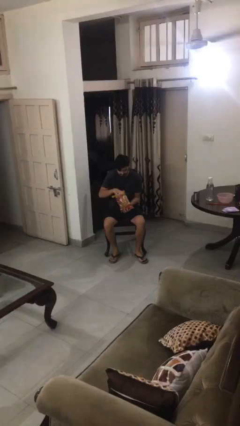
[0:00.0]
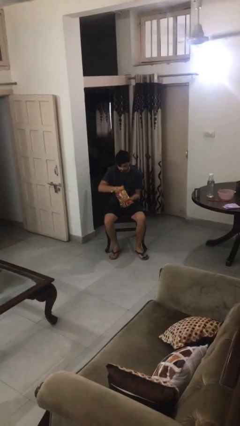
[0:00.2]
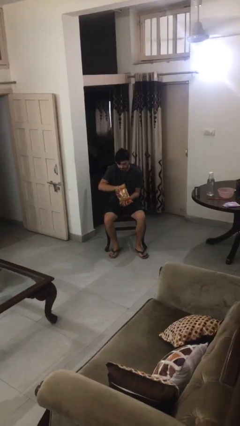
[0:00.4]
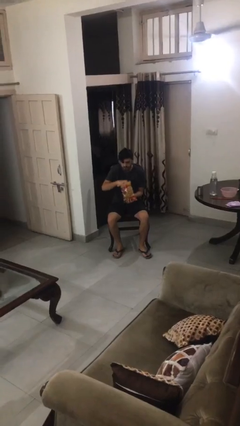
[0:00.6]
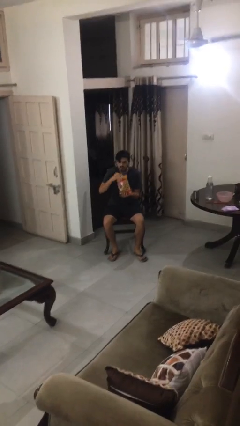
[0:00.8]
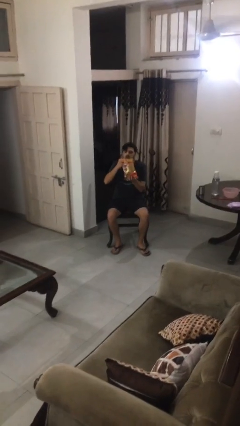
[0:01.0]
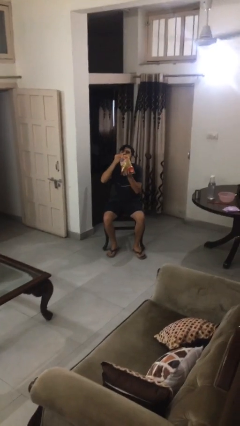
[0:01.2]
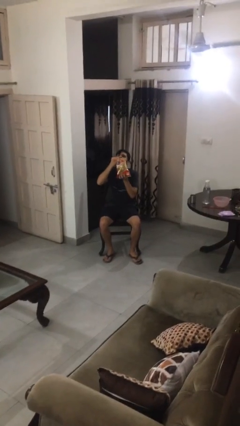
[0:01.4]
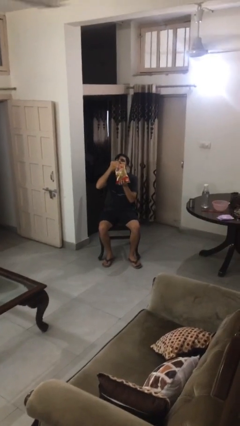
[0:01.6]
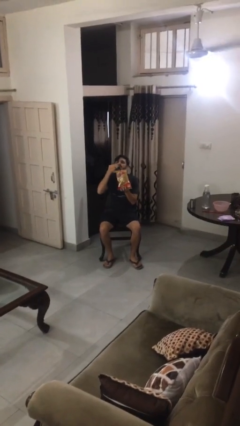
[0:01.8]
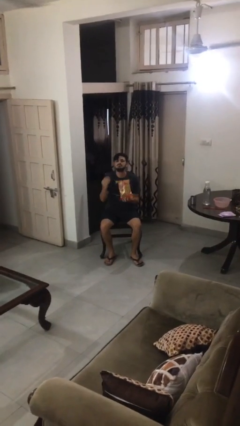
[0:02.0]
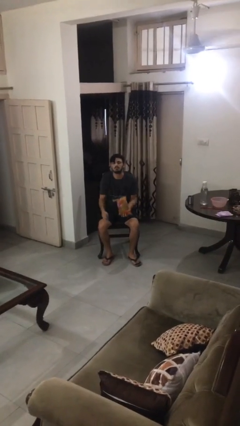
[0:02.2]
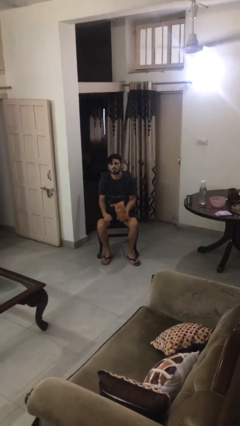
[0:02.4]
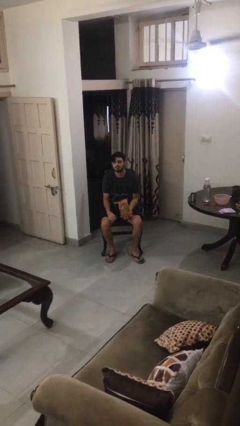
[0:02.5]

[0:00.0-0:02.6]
person eats snack from bag

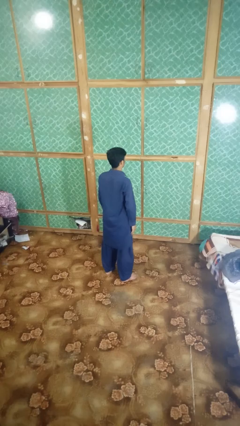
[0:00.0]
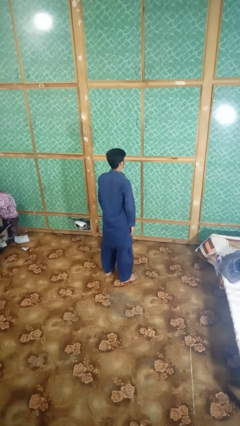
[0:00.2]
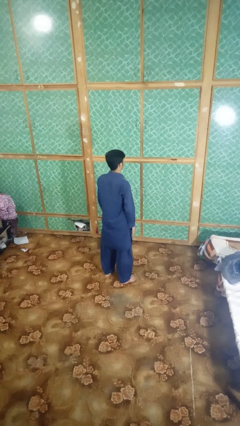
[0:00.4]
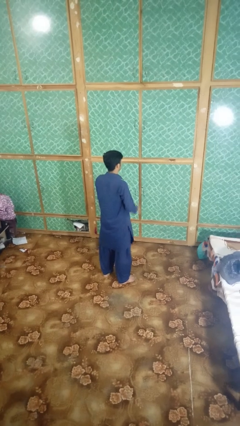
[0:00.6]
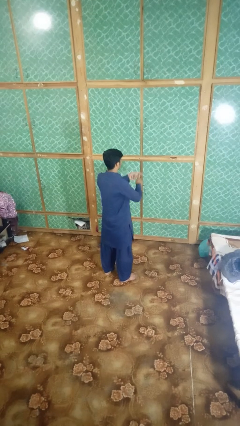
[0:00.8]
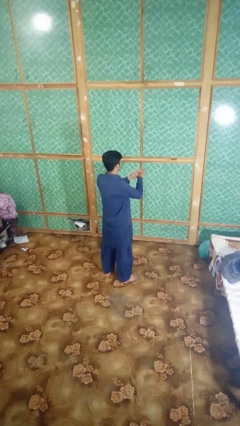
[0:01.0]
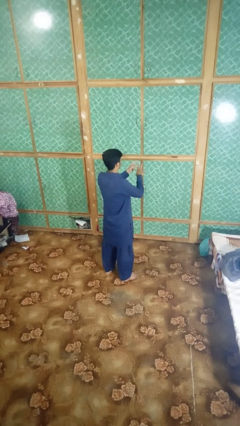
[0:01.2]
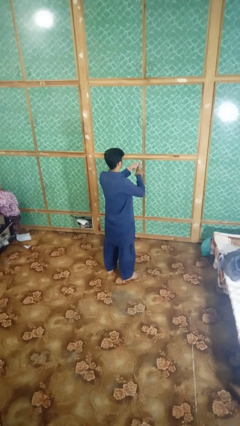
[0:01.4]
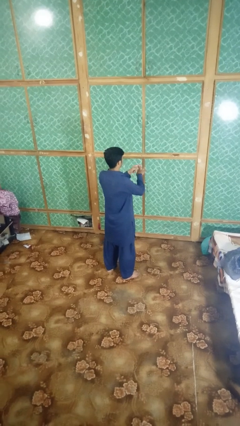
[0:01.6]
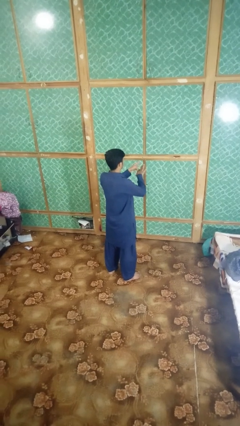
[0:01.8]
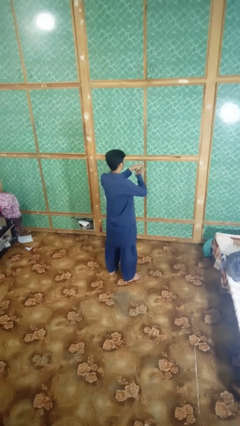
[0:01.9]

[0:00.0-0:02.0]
person snaps fingers

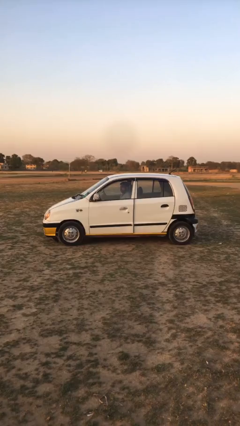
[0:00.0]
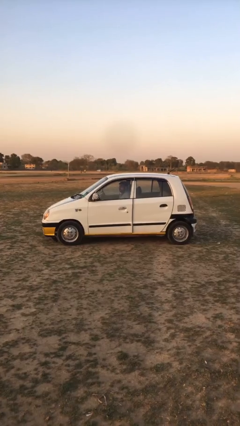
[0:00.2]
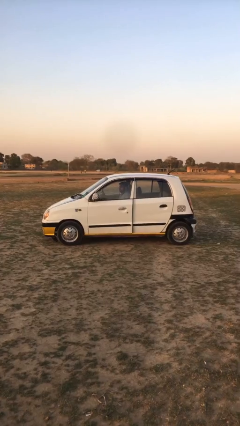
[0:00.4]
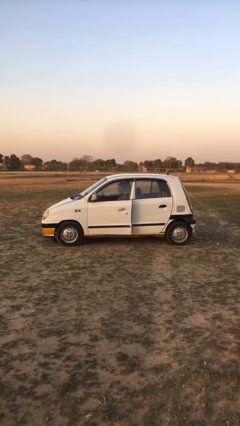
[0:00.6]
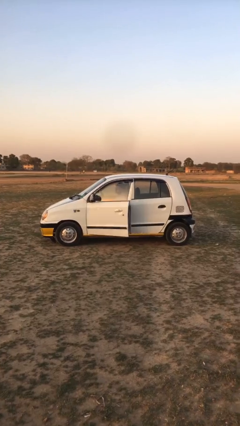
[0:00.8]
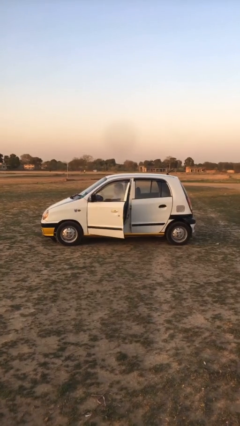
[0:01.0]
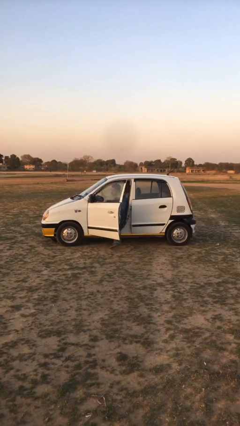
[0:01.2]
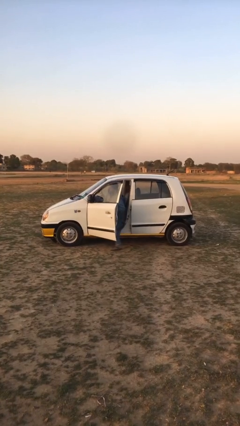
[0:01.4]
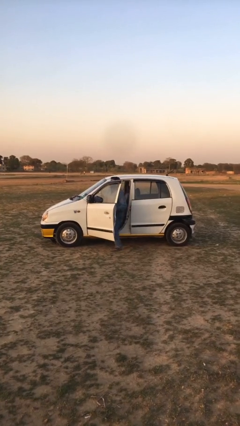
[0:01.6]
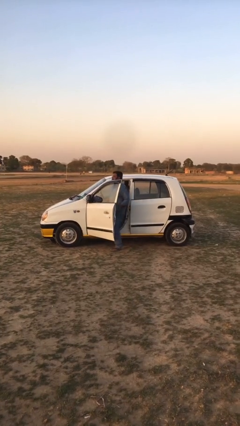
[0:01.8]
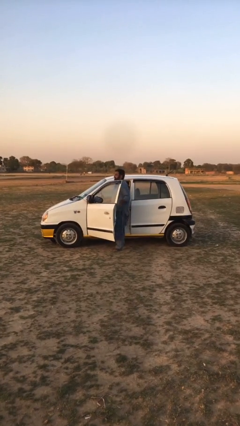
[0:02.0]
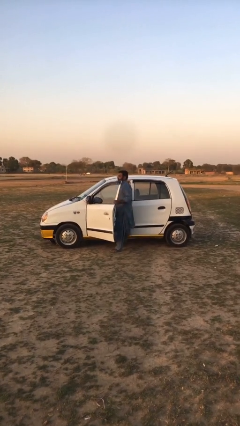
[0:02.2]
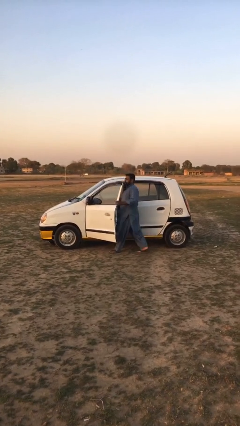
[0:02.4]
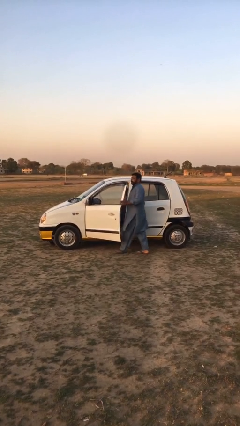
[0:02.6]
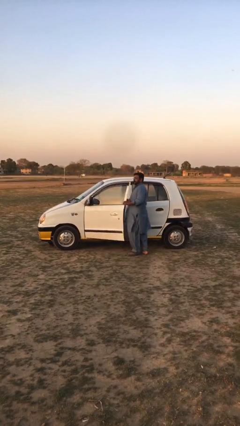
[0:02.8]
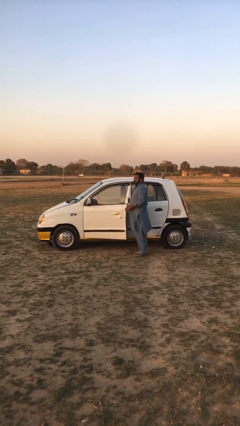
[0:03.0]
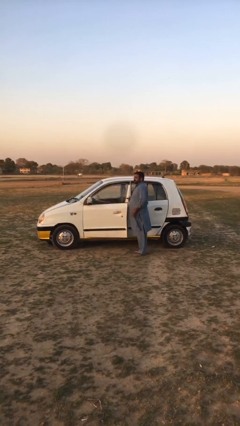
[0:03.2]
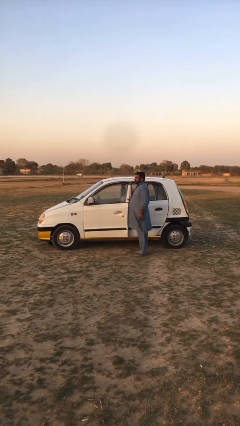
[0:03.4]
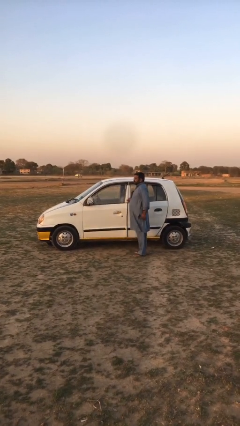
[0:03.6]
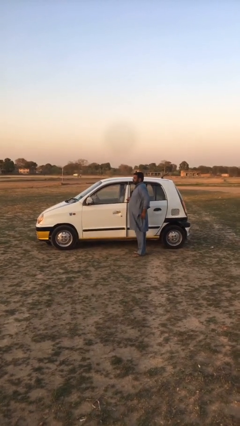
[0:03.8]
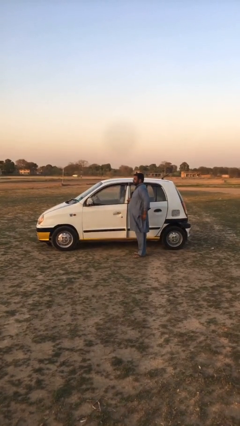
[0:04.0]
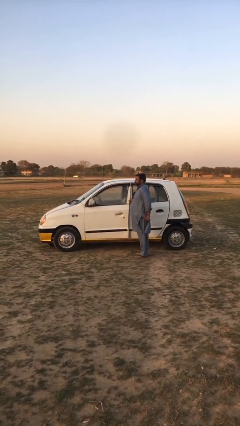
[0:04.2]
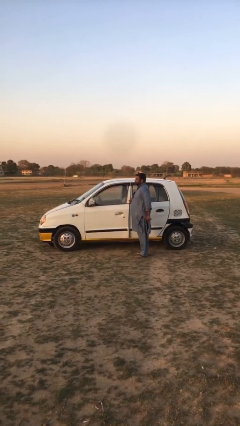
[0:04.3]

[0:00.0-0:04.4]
car drops off person

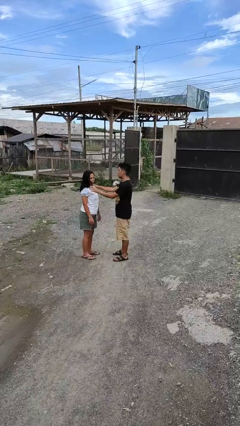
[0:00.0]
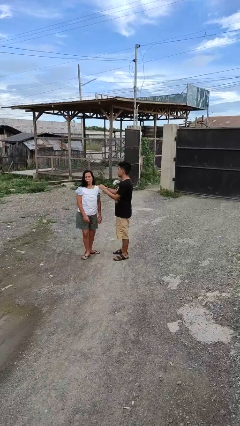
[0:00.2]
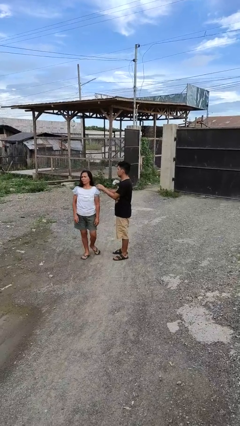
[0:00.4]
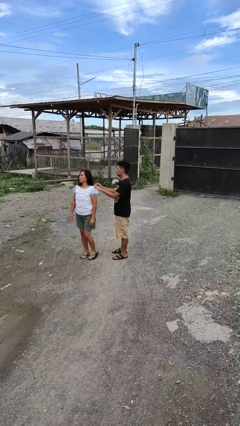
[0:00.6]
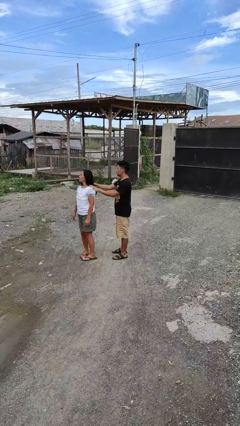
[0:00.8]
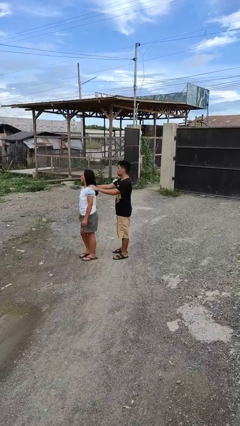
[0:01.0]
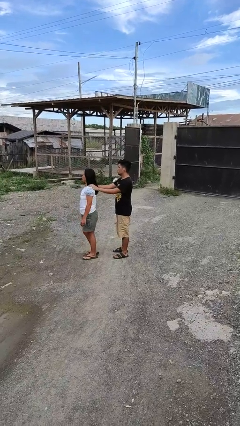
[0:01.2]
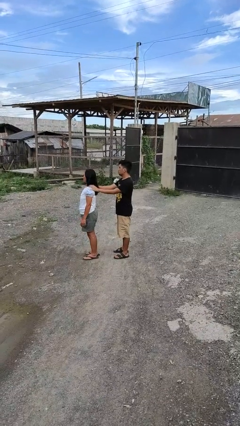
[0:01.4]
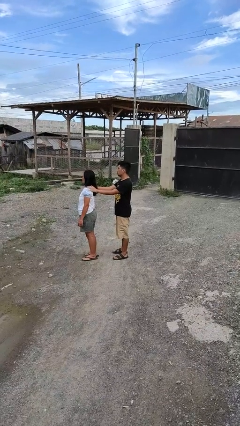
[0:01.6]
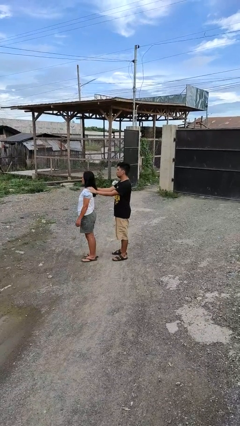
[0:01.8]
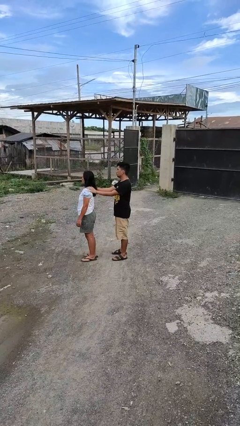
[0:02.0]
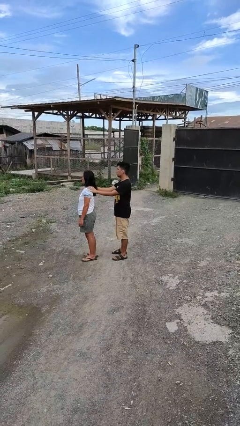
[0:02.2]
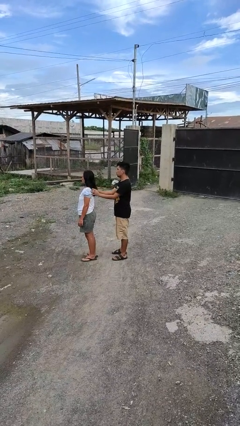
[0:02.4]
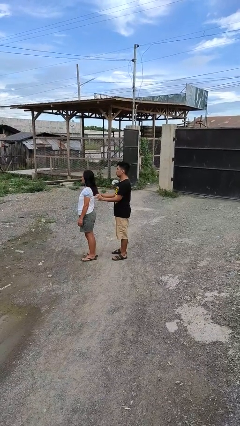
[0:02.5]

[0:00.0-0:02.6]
person spins person around

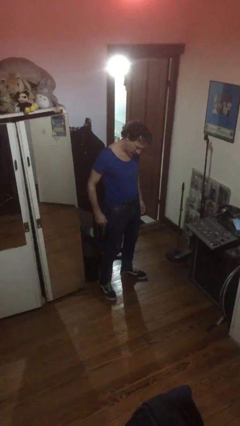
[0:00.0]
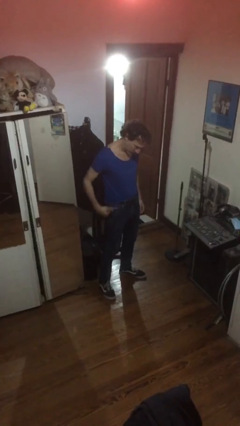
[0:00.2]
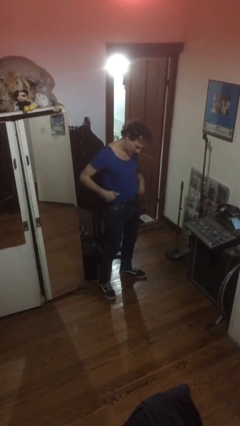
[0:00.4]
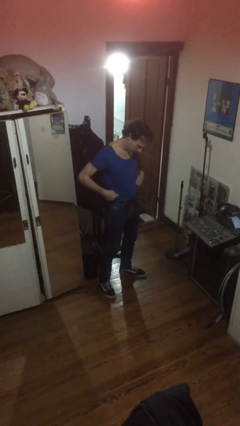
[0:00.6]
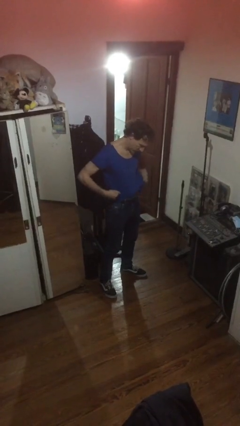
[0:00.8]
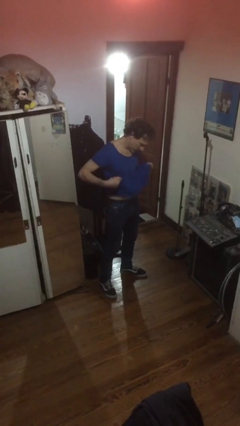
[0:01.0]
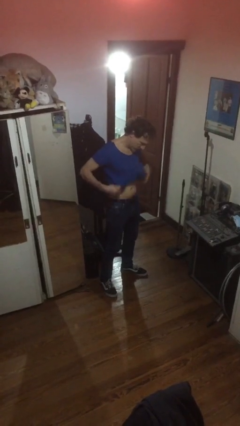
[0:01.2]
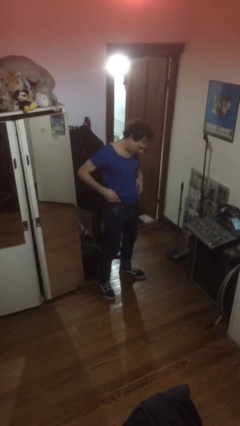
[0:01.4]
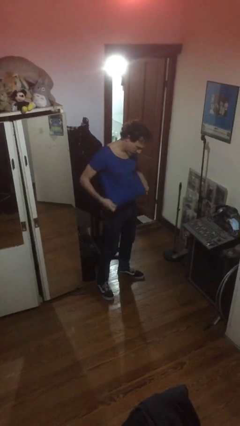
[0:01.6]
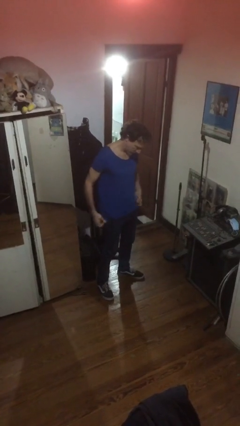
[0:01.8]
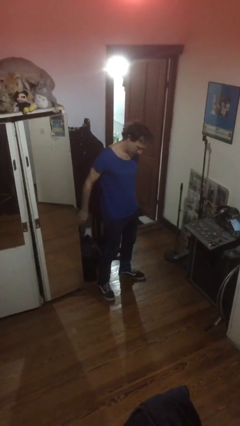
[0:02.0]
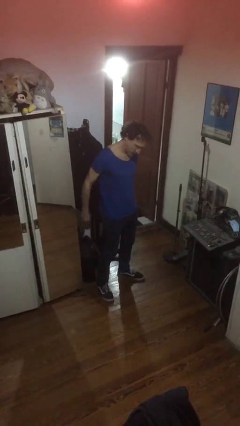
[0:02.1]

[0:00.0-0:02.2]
person untucks shirt

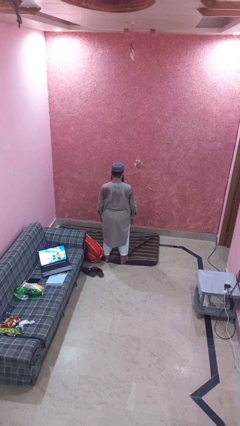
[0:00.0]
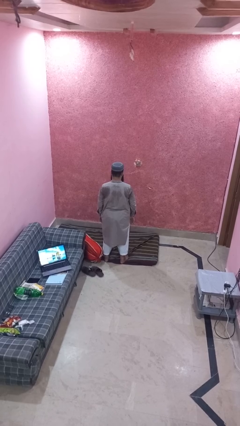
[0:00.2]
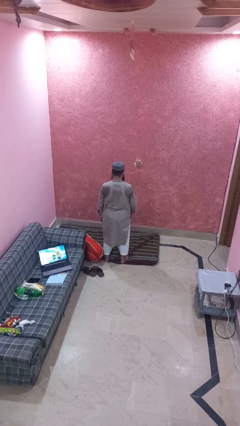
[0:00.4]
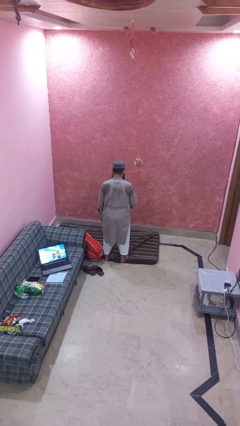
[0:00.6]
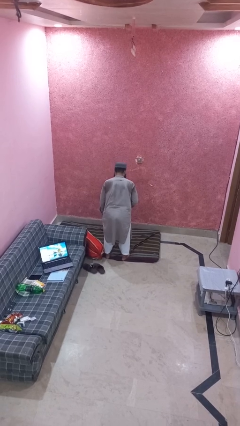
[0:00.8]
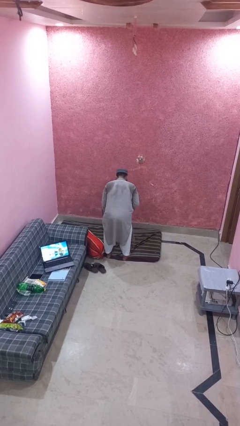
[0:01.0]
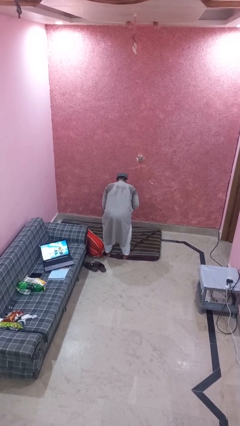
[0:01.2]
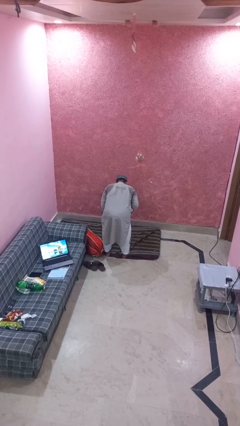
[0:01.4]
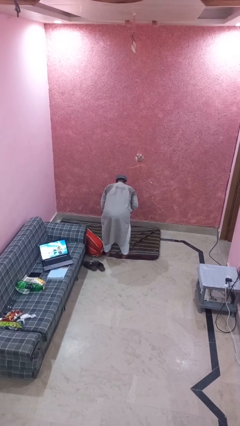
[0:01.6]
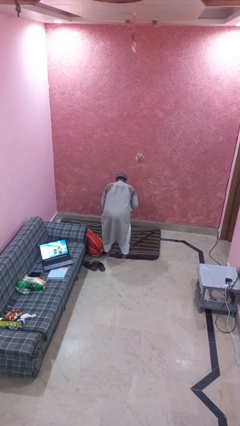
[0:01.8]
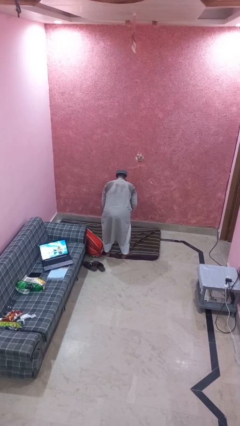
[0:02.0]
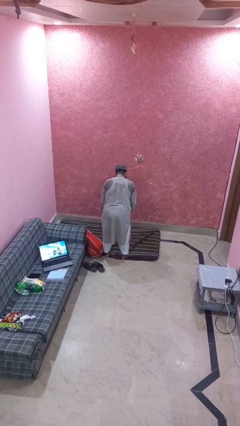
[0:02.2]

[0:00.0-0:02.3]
person bows

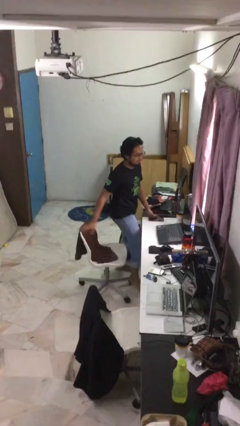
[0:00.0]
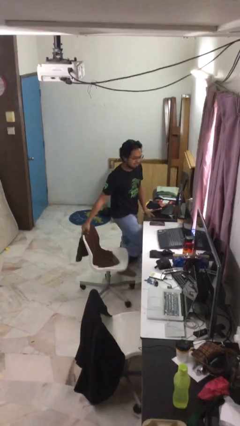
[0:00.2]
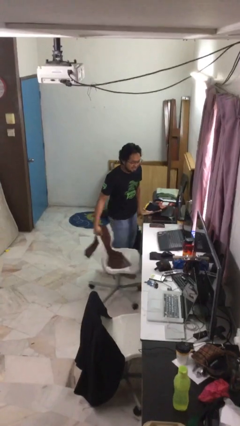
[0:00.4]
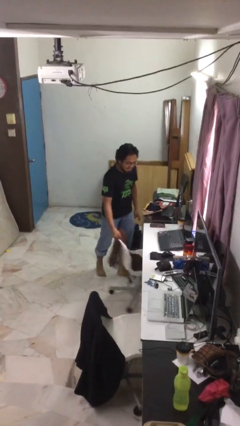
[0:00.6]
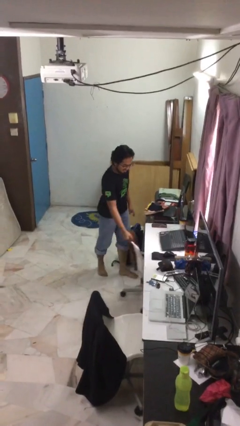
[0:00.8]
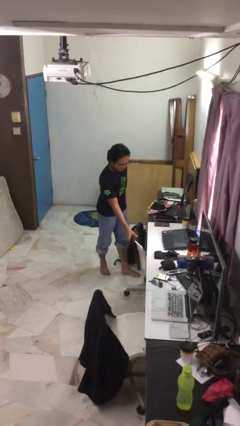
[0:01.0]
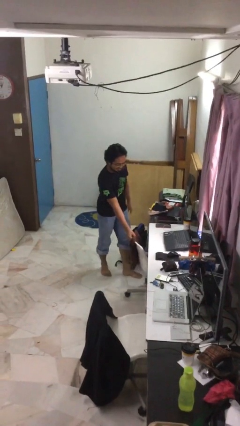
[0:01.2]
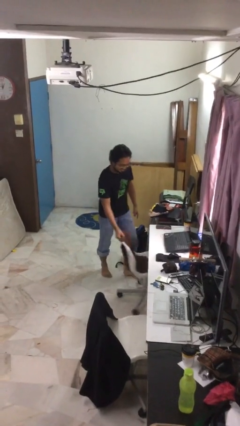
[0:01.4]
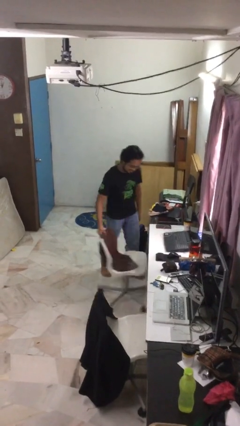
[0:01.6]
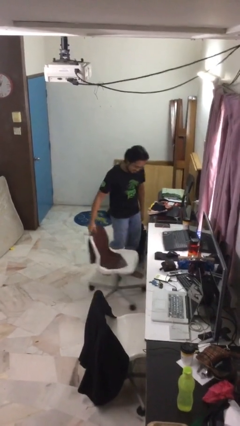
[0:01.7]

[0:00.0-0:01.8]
person stands up
